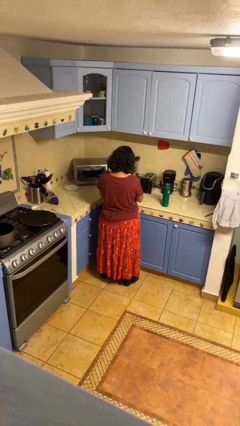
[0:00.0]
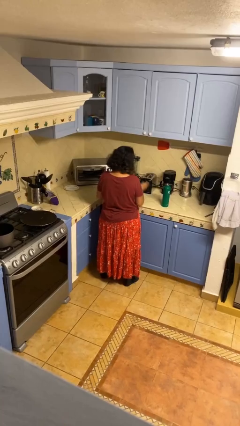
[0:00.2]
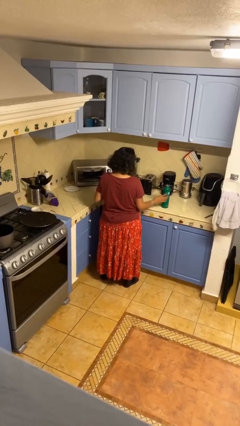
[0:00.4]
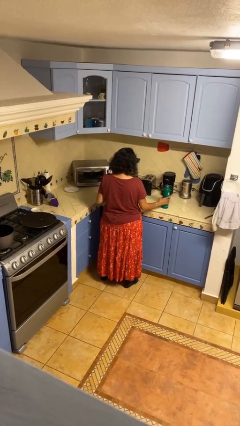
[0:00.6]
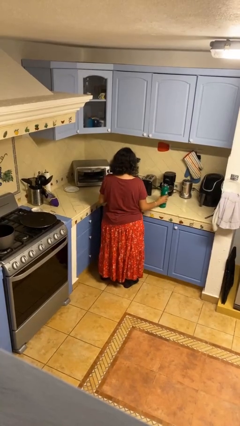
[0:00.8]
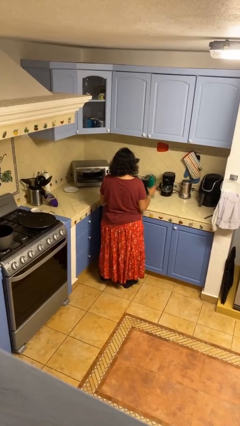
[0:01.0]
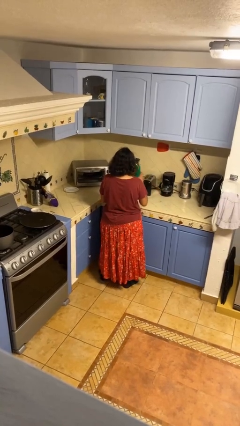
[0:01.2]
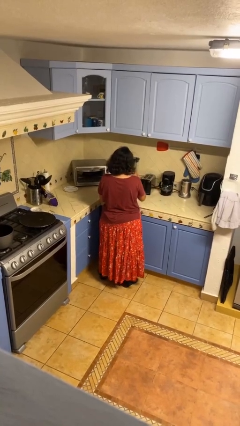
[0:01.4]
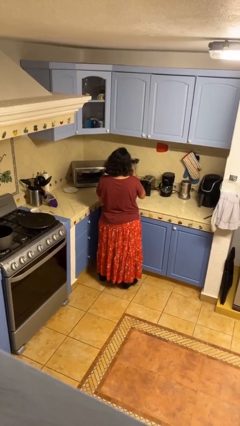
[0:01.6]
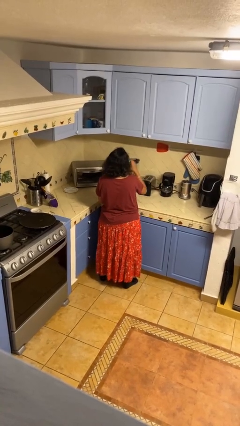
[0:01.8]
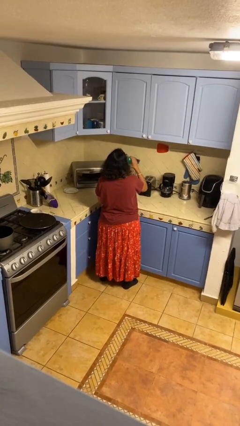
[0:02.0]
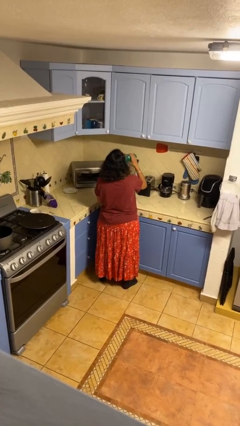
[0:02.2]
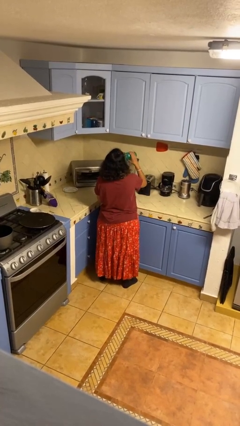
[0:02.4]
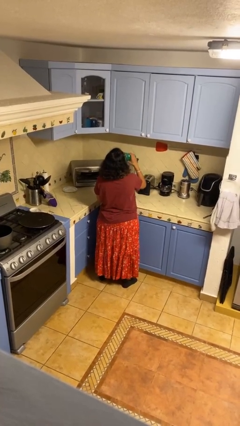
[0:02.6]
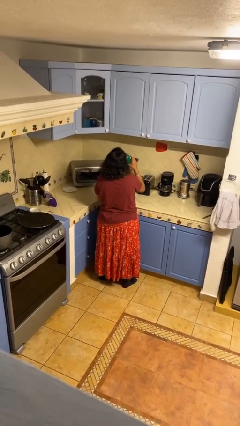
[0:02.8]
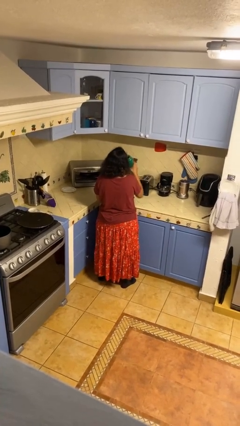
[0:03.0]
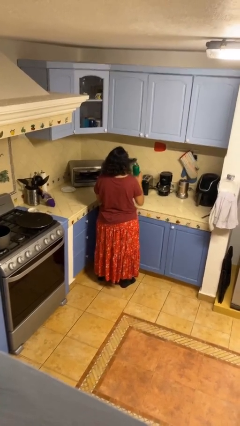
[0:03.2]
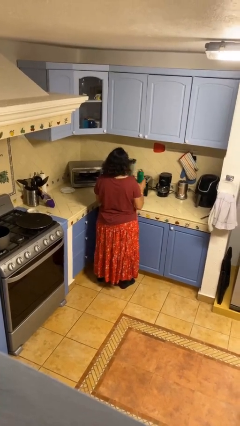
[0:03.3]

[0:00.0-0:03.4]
person drinks from bottle

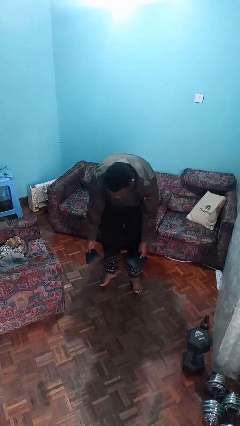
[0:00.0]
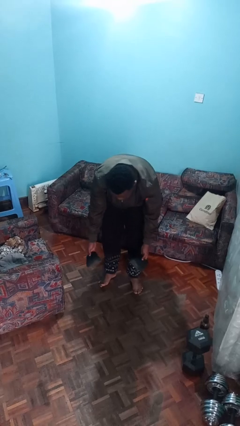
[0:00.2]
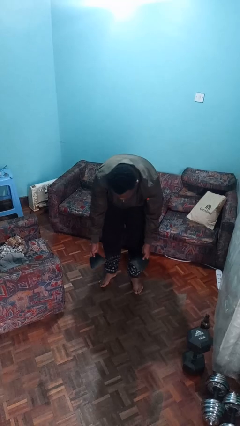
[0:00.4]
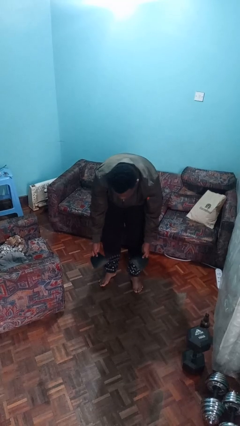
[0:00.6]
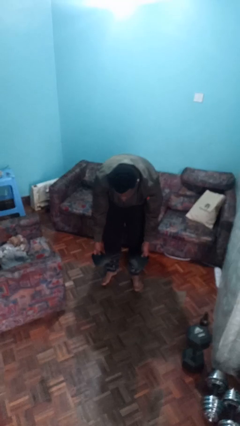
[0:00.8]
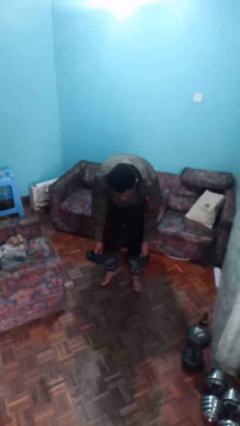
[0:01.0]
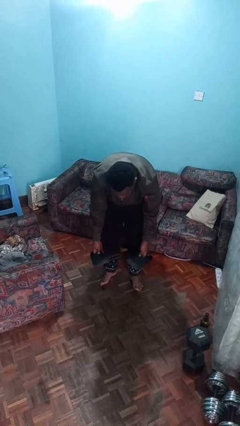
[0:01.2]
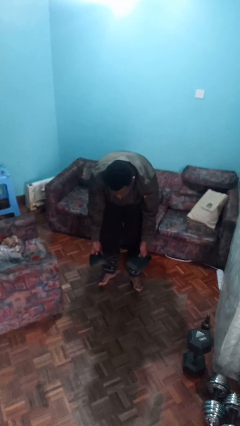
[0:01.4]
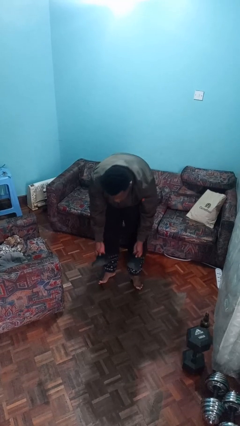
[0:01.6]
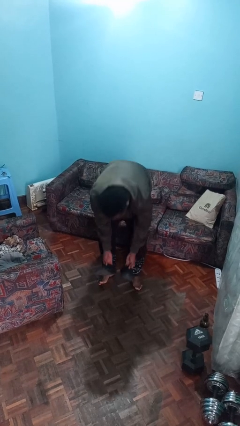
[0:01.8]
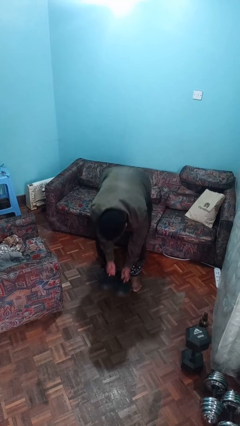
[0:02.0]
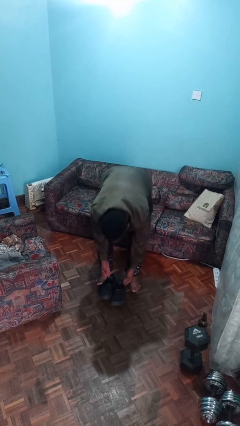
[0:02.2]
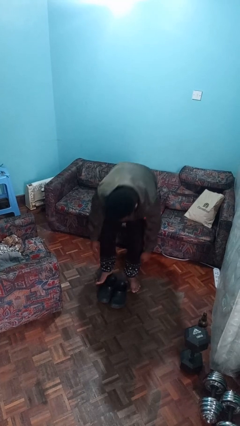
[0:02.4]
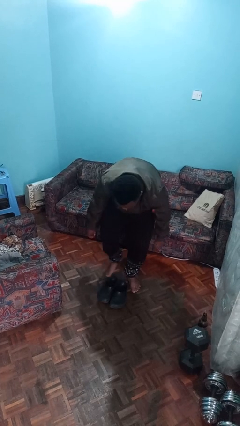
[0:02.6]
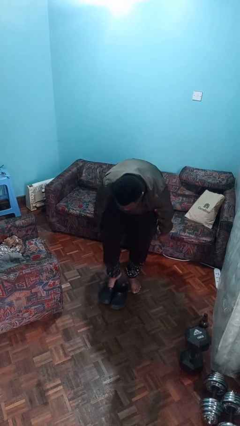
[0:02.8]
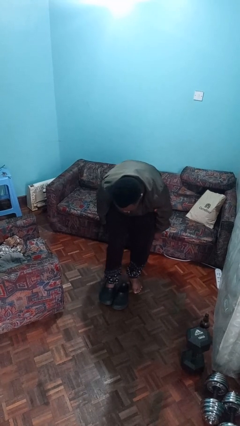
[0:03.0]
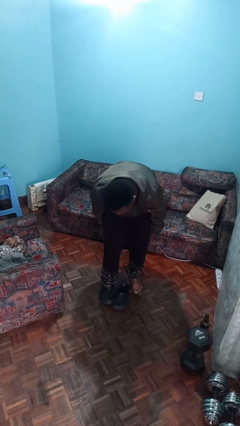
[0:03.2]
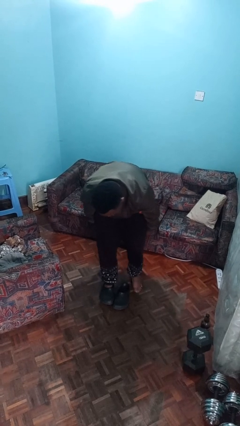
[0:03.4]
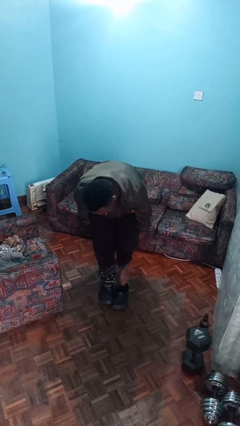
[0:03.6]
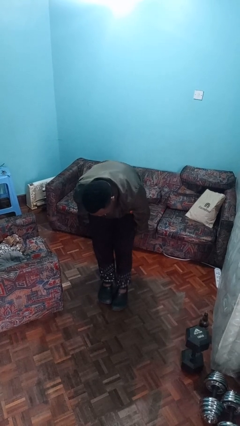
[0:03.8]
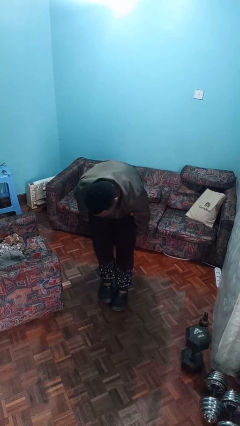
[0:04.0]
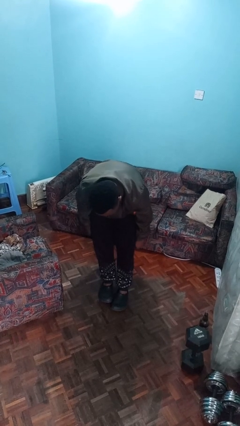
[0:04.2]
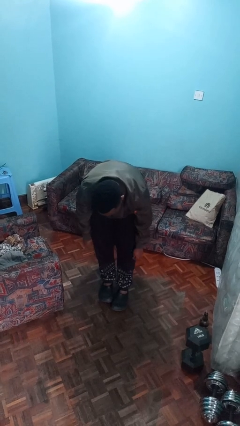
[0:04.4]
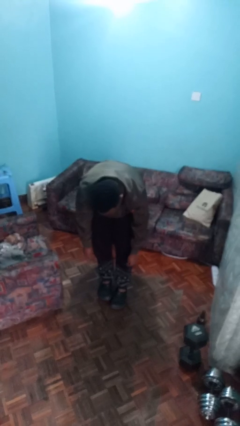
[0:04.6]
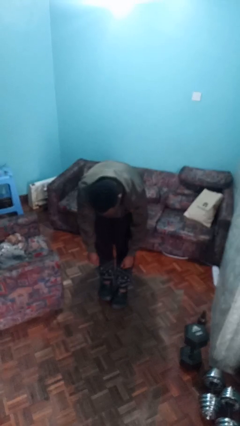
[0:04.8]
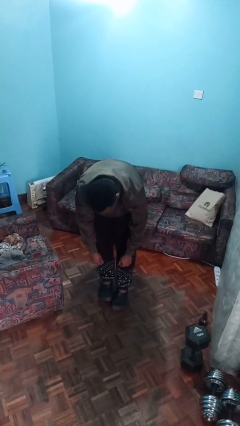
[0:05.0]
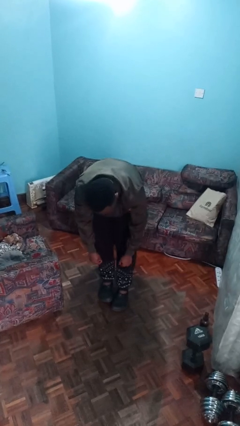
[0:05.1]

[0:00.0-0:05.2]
person puts on shoes

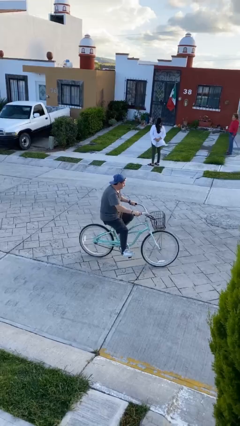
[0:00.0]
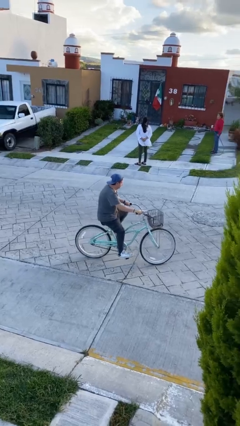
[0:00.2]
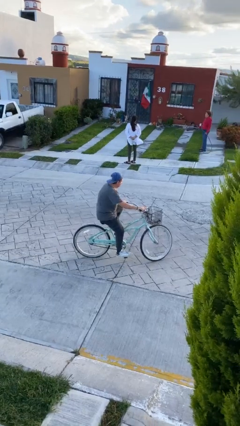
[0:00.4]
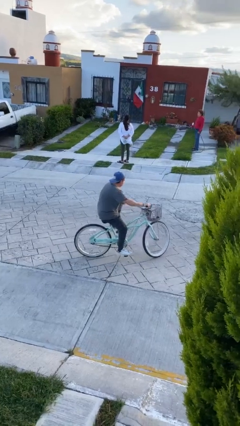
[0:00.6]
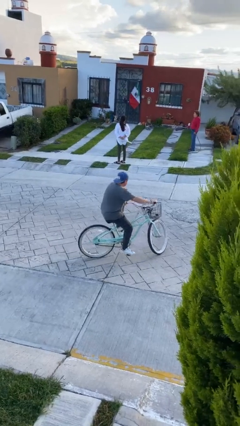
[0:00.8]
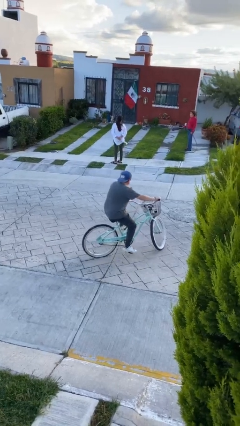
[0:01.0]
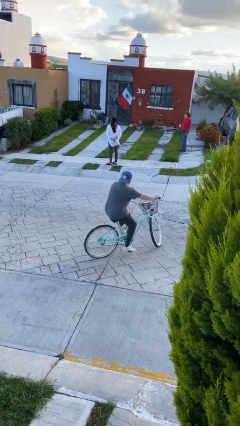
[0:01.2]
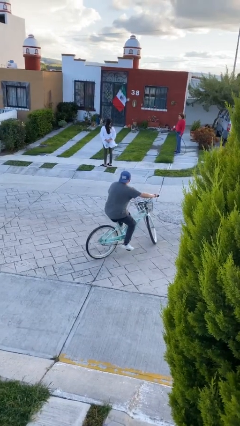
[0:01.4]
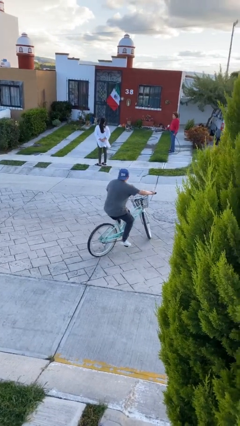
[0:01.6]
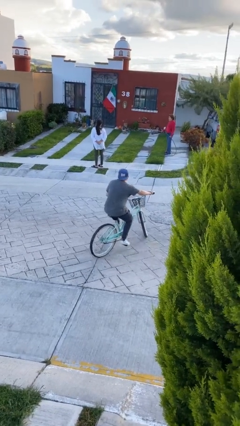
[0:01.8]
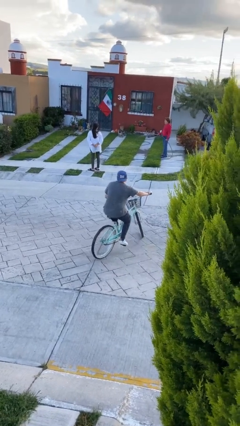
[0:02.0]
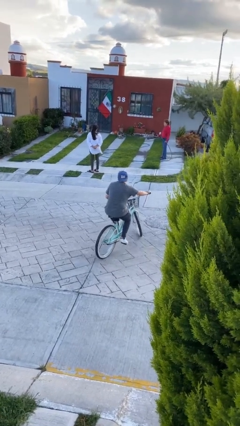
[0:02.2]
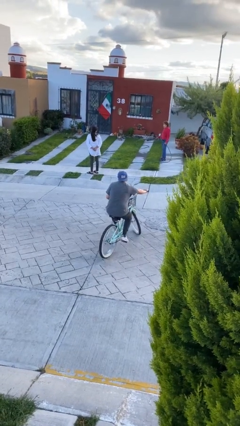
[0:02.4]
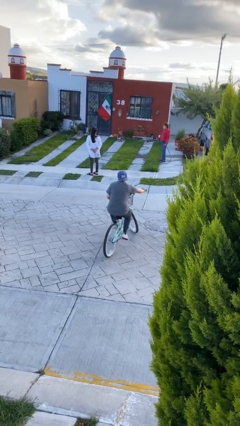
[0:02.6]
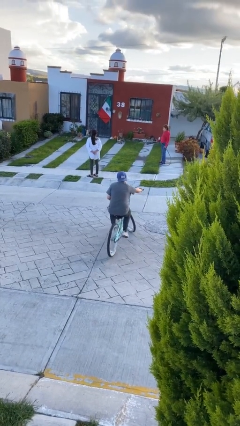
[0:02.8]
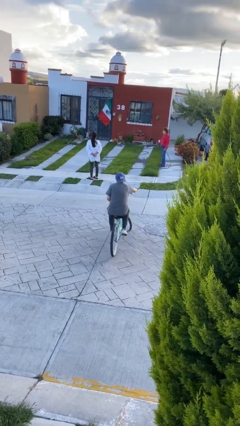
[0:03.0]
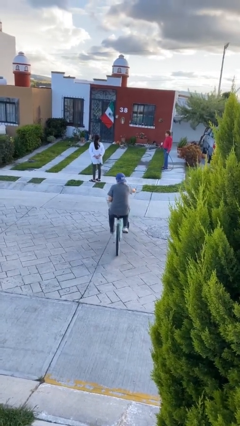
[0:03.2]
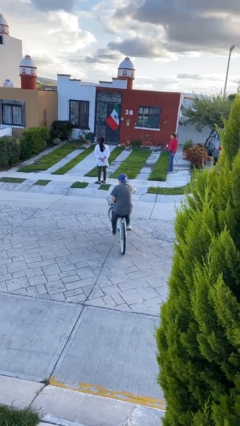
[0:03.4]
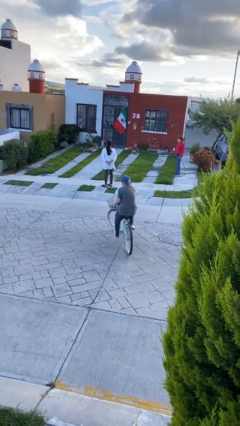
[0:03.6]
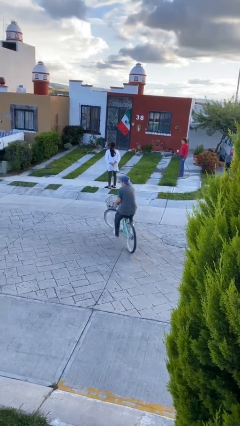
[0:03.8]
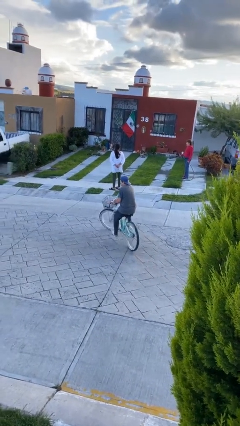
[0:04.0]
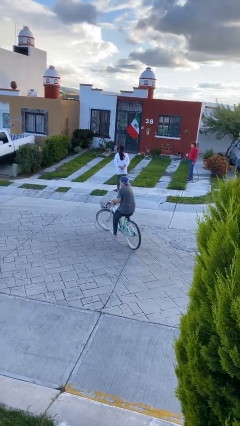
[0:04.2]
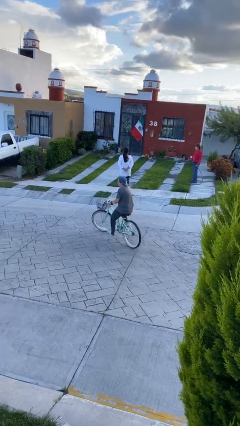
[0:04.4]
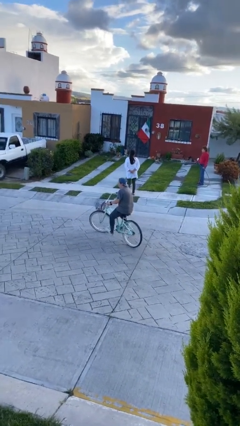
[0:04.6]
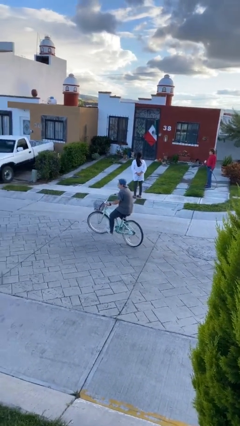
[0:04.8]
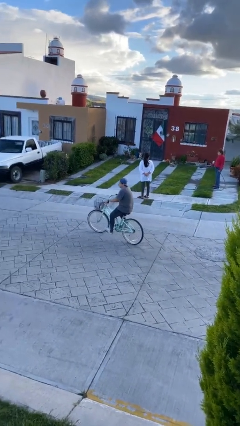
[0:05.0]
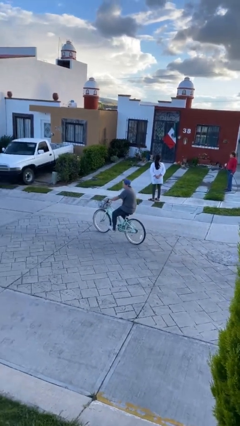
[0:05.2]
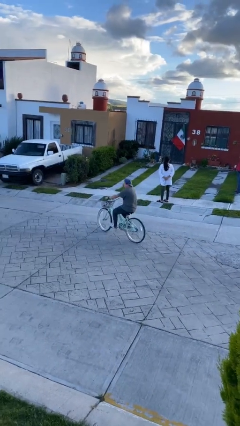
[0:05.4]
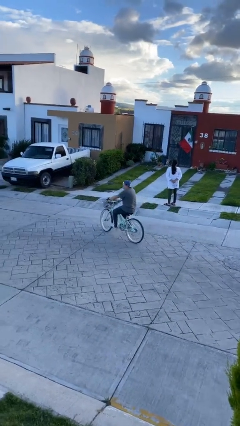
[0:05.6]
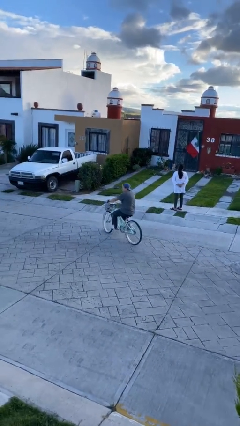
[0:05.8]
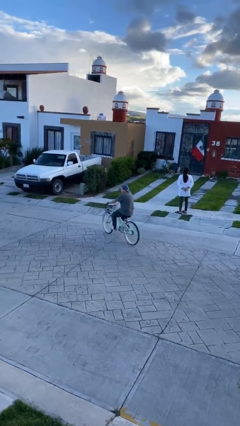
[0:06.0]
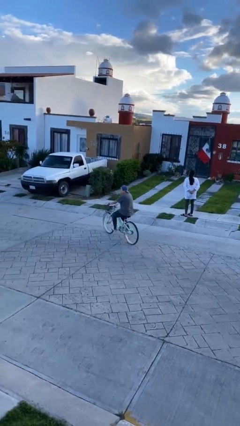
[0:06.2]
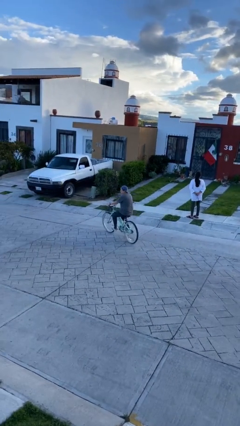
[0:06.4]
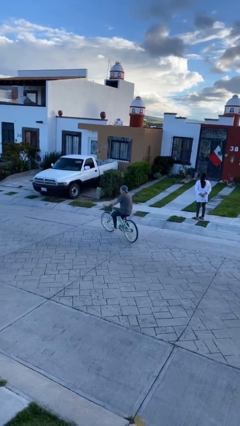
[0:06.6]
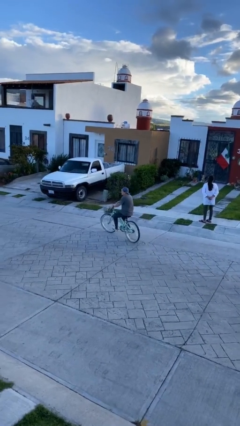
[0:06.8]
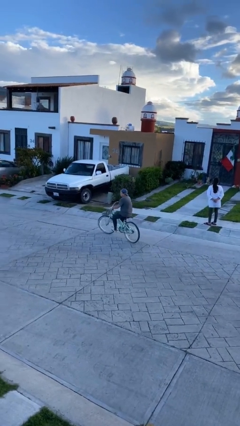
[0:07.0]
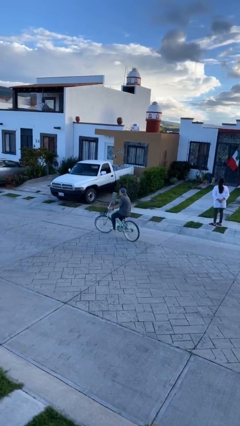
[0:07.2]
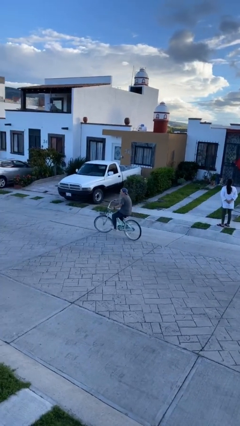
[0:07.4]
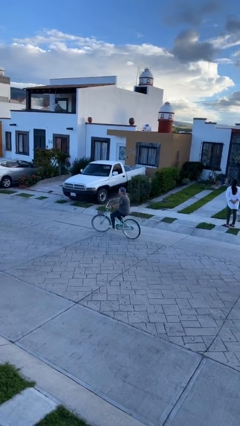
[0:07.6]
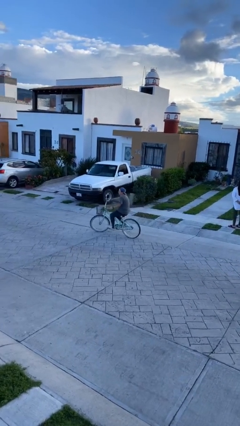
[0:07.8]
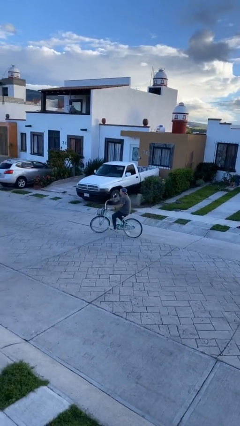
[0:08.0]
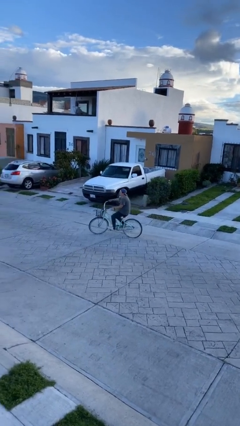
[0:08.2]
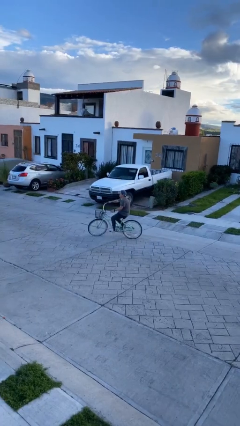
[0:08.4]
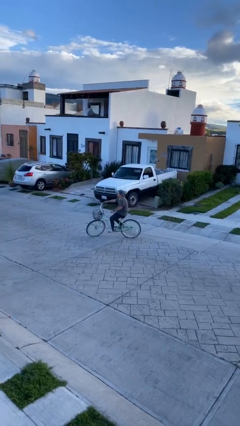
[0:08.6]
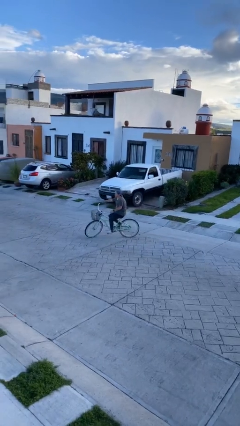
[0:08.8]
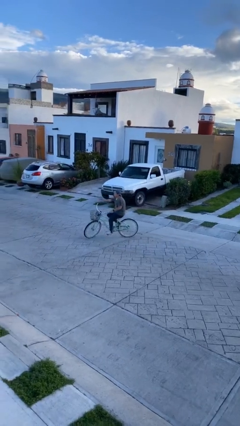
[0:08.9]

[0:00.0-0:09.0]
person rides bicycle

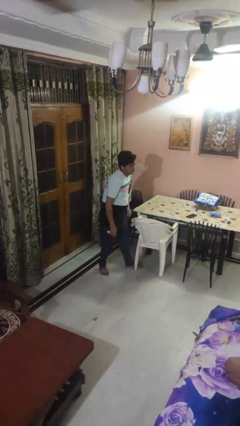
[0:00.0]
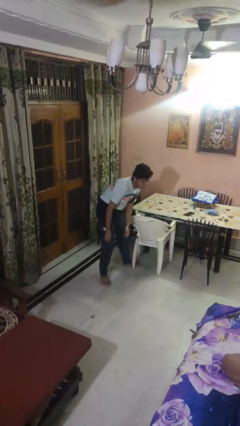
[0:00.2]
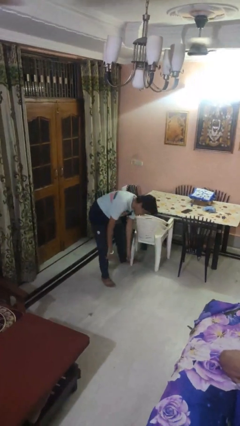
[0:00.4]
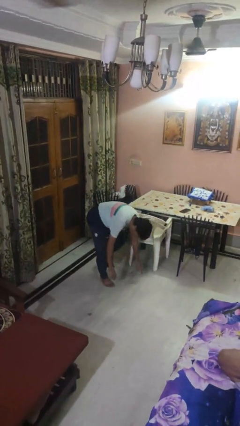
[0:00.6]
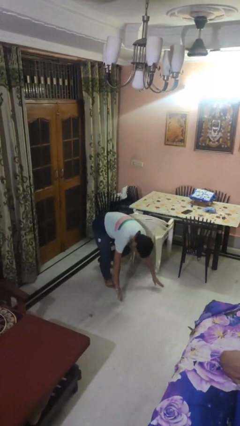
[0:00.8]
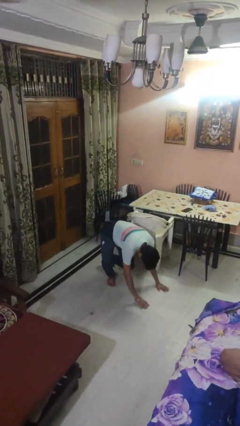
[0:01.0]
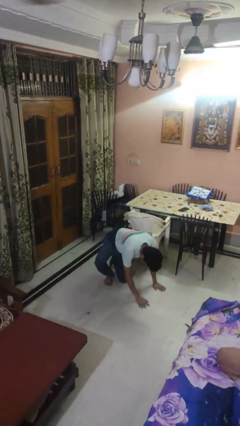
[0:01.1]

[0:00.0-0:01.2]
person trips on object on floor
